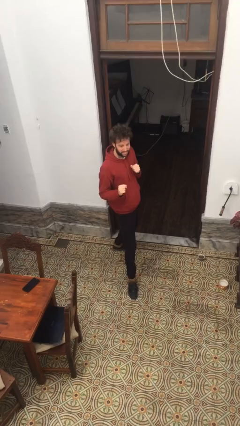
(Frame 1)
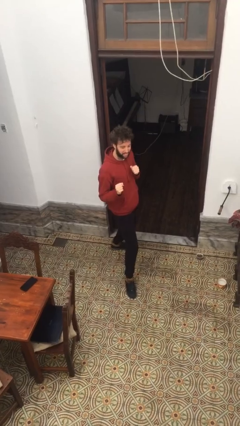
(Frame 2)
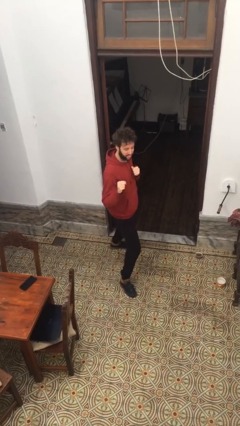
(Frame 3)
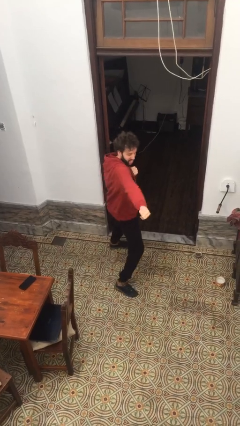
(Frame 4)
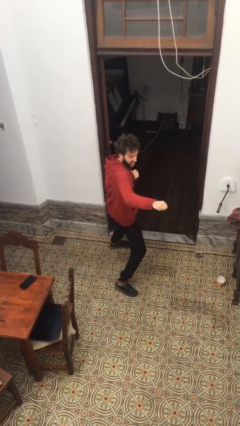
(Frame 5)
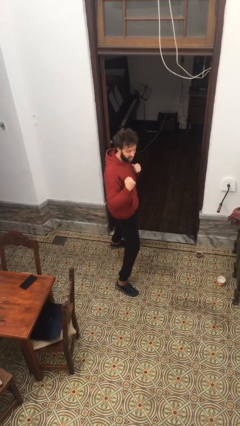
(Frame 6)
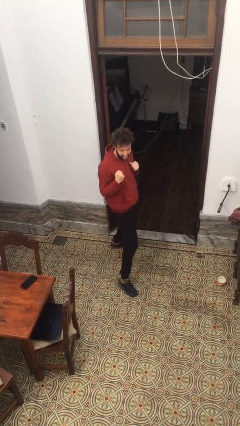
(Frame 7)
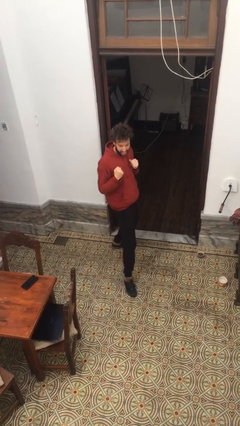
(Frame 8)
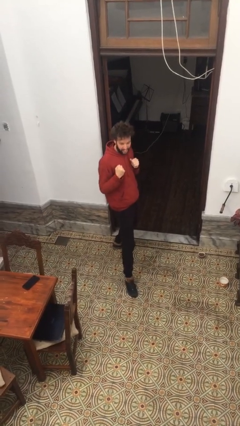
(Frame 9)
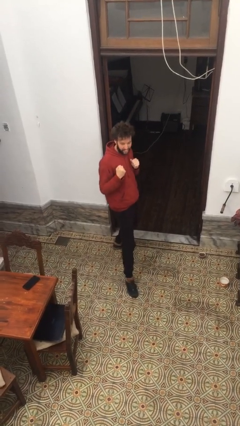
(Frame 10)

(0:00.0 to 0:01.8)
person karate chop

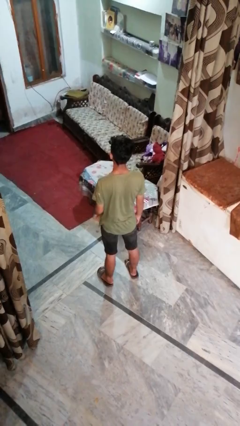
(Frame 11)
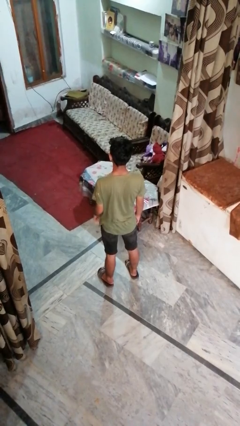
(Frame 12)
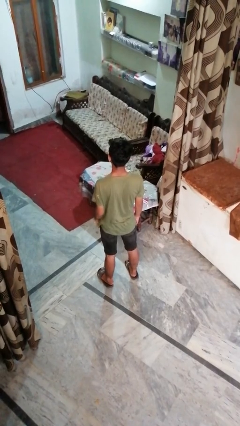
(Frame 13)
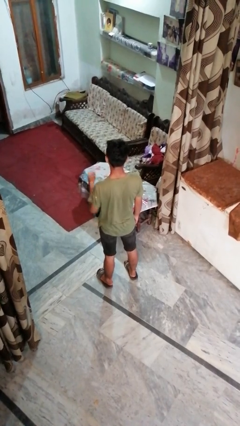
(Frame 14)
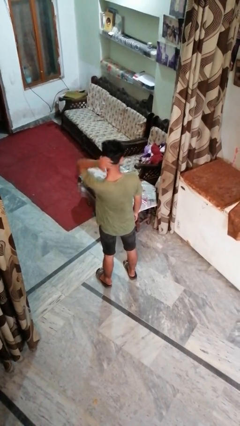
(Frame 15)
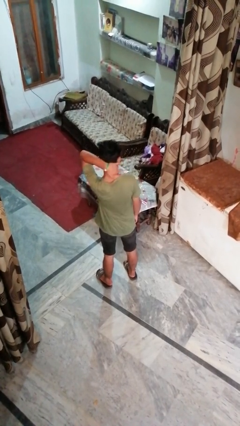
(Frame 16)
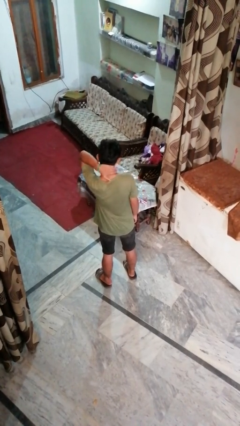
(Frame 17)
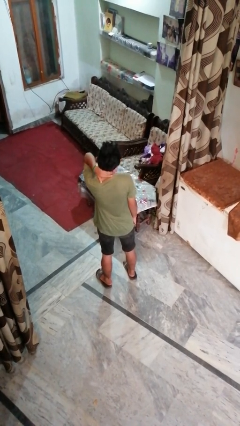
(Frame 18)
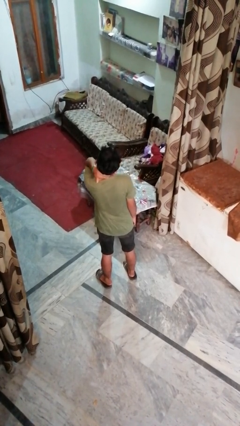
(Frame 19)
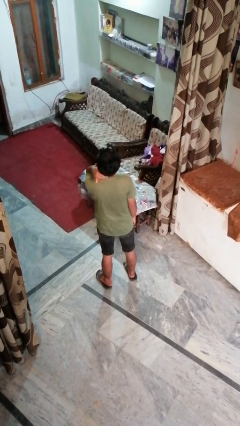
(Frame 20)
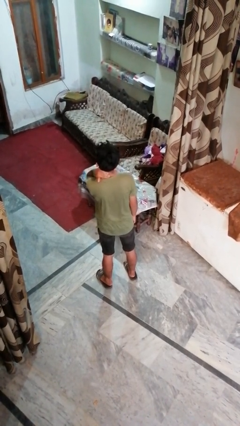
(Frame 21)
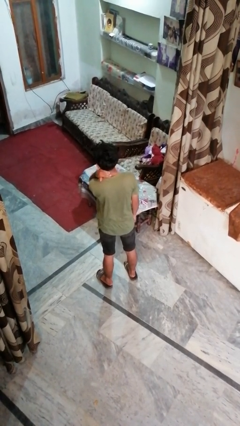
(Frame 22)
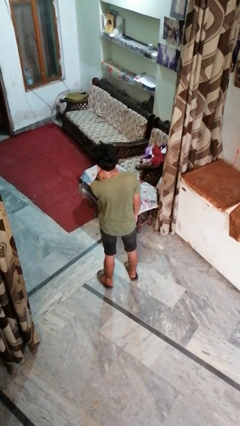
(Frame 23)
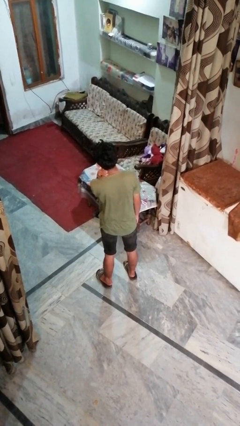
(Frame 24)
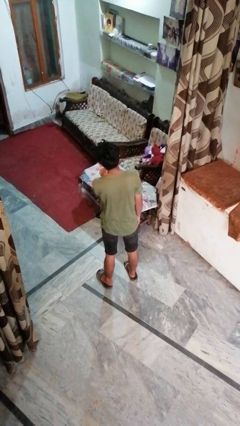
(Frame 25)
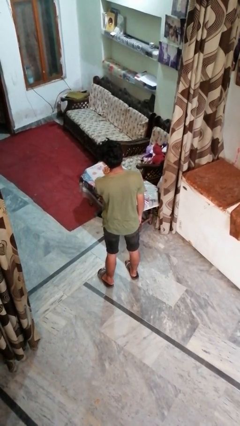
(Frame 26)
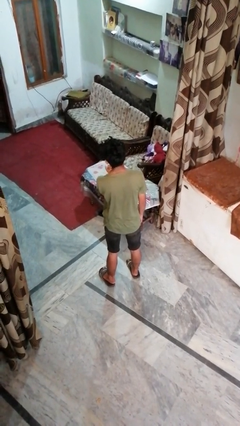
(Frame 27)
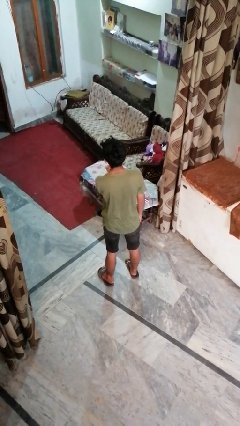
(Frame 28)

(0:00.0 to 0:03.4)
person rubs neck

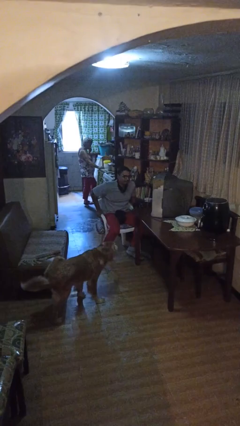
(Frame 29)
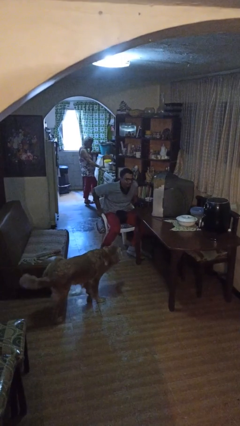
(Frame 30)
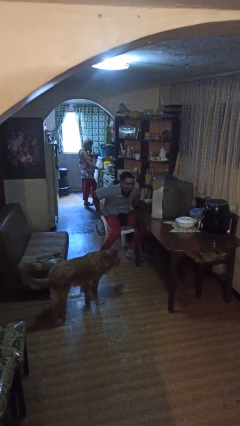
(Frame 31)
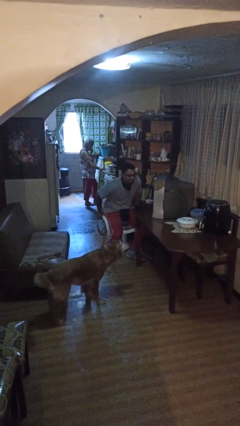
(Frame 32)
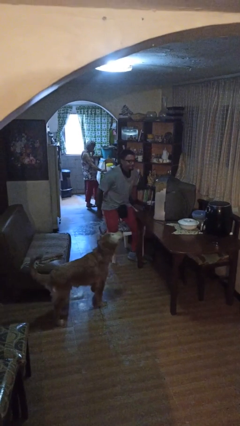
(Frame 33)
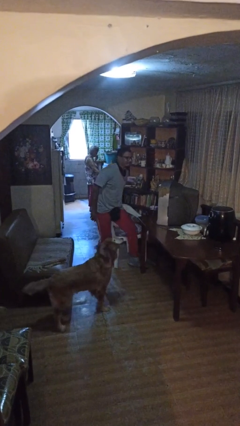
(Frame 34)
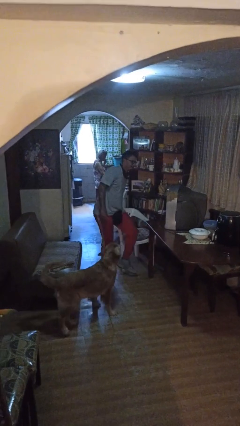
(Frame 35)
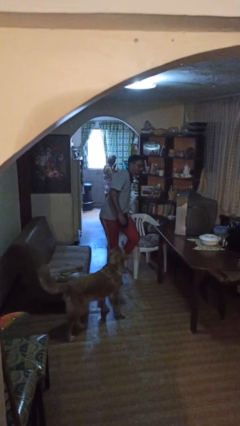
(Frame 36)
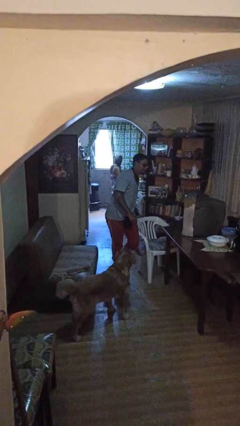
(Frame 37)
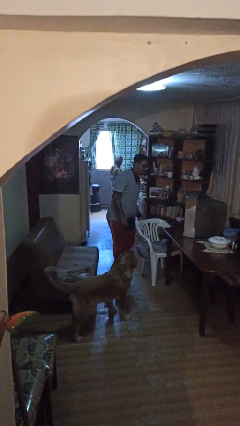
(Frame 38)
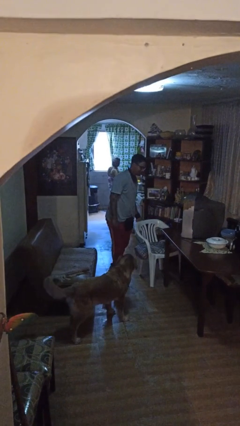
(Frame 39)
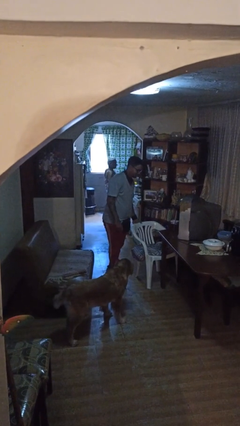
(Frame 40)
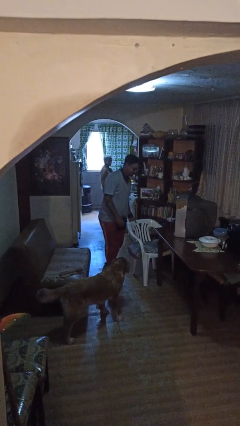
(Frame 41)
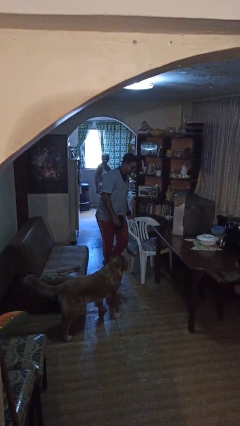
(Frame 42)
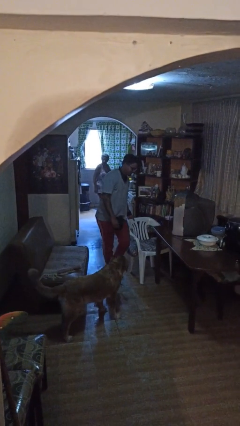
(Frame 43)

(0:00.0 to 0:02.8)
person stands up

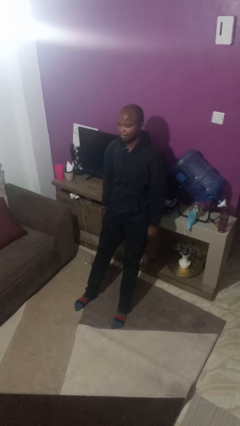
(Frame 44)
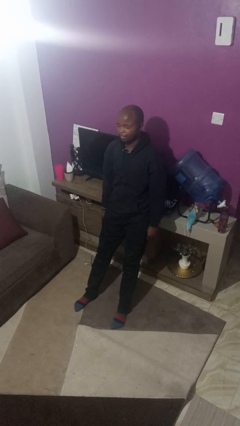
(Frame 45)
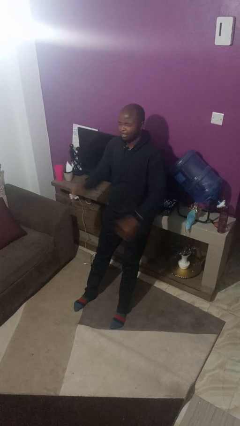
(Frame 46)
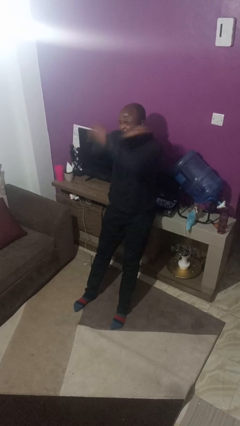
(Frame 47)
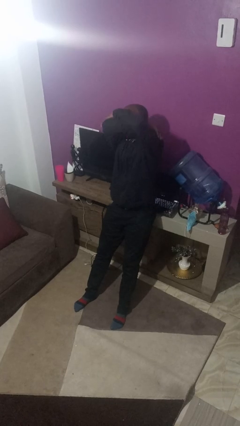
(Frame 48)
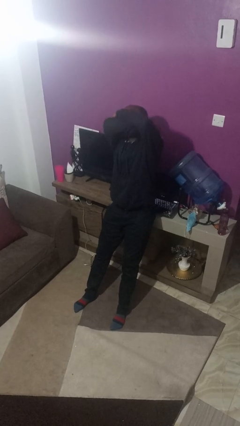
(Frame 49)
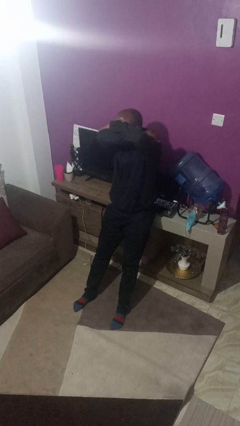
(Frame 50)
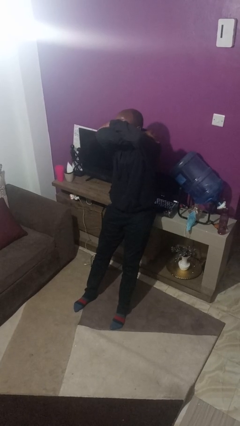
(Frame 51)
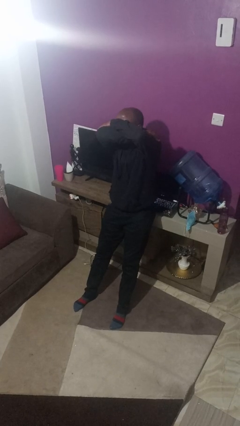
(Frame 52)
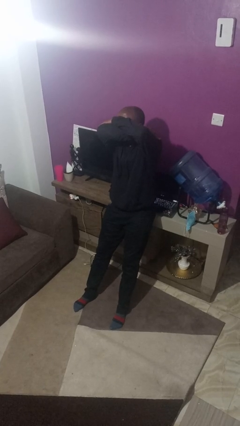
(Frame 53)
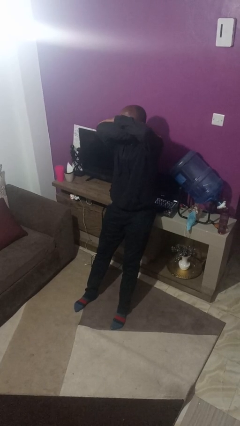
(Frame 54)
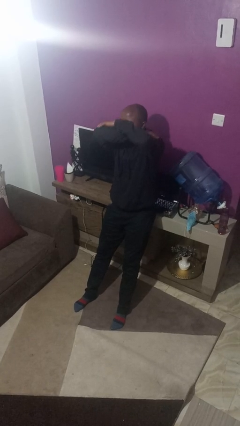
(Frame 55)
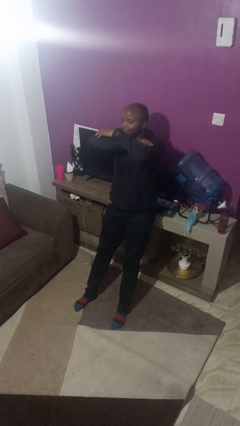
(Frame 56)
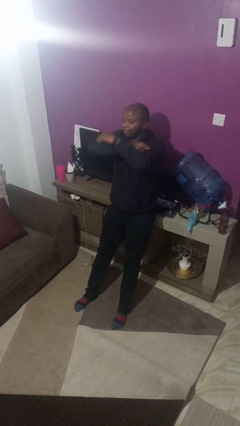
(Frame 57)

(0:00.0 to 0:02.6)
person sneezes into hand

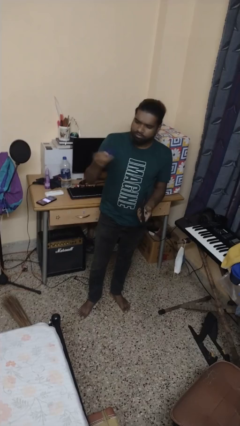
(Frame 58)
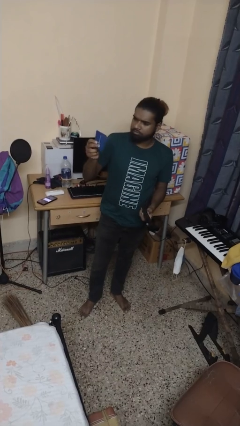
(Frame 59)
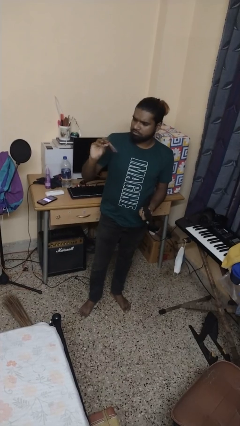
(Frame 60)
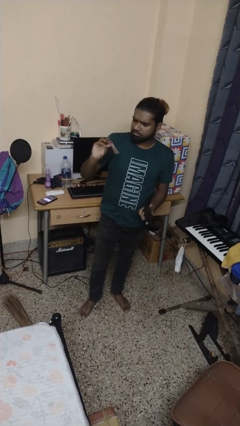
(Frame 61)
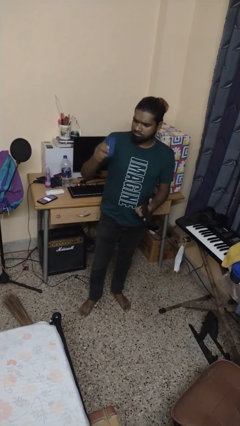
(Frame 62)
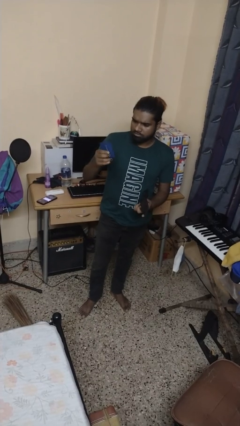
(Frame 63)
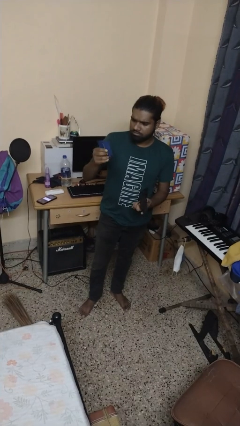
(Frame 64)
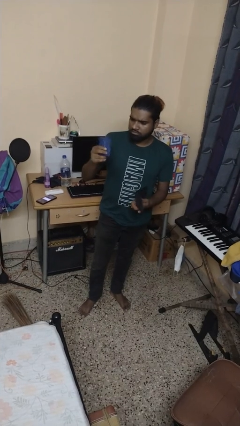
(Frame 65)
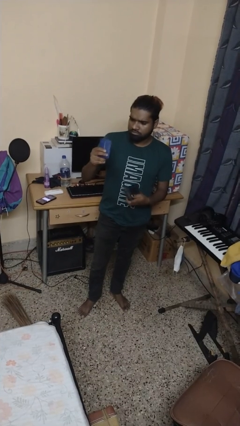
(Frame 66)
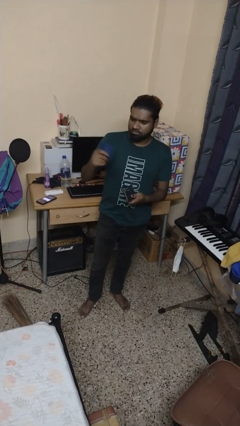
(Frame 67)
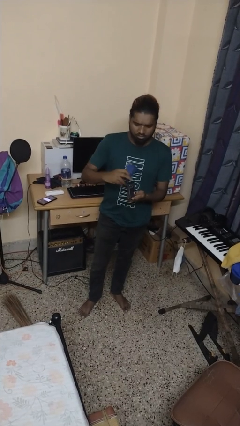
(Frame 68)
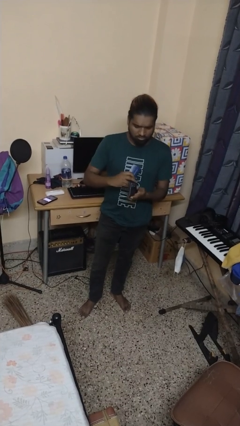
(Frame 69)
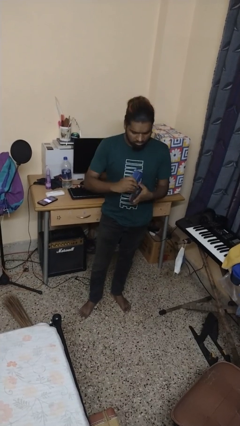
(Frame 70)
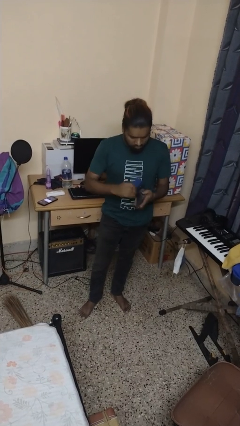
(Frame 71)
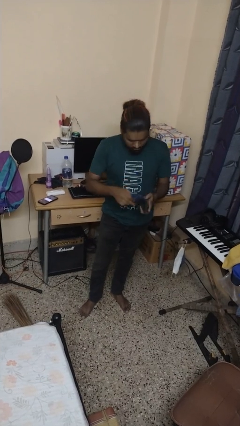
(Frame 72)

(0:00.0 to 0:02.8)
person takes object from purse

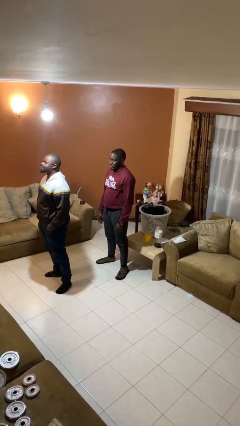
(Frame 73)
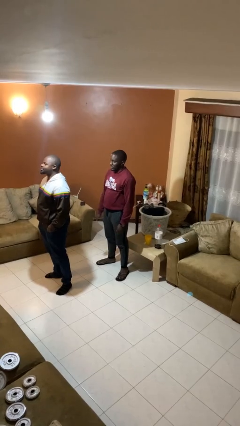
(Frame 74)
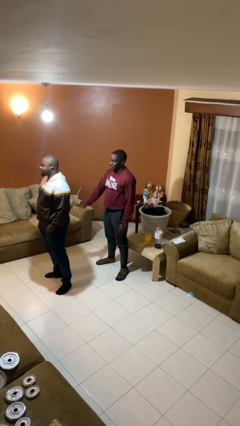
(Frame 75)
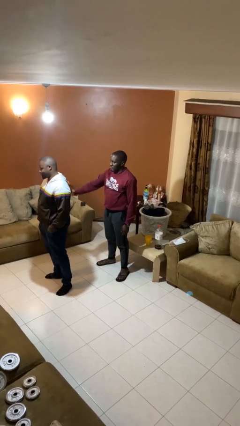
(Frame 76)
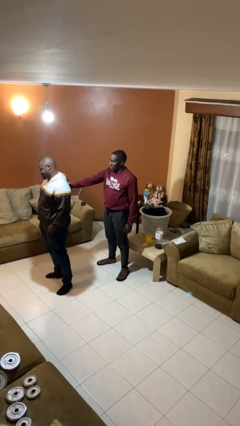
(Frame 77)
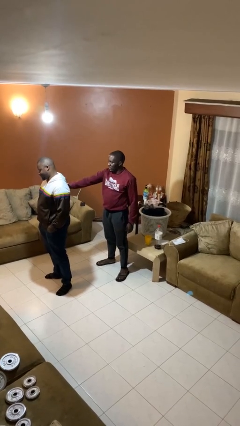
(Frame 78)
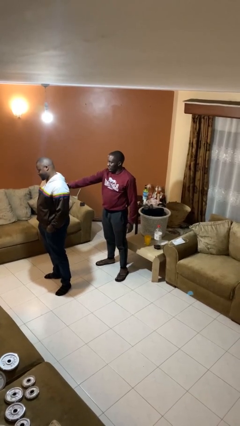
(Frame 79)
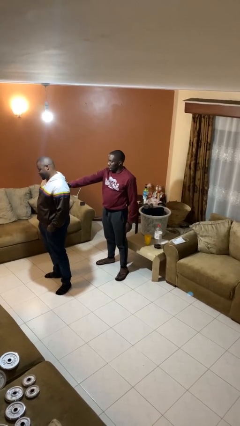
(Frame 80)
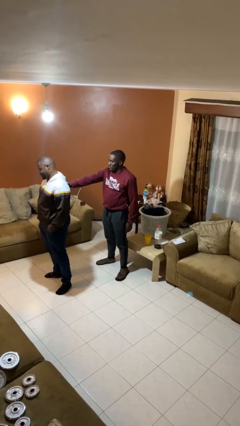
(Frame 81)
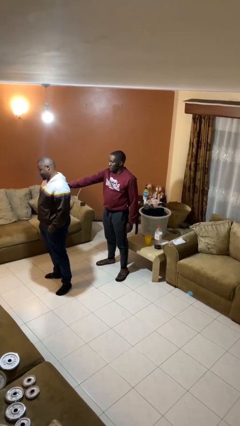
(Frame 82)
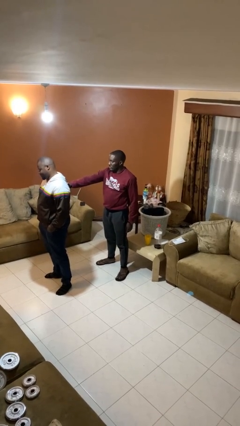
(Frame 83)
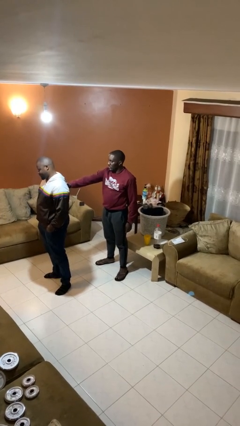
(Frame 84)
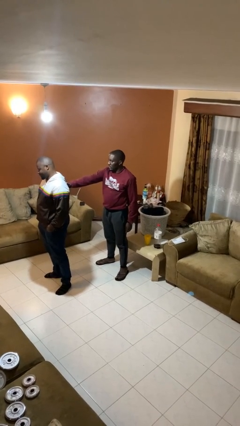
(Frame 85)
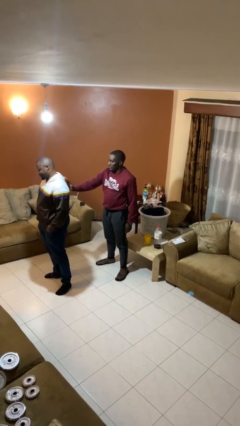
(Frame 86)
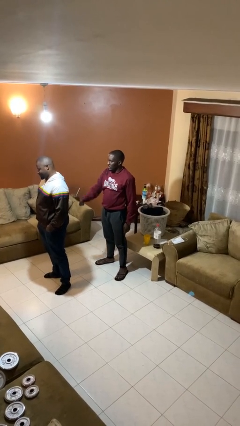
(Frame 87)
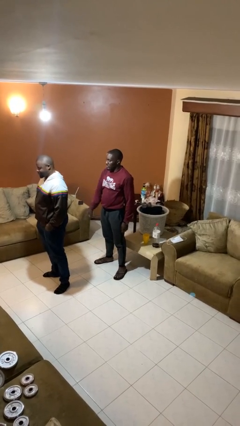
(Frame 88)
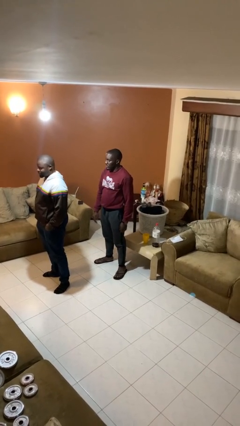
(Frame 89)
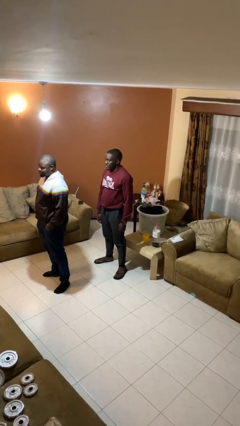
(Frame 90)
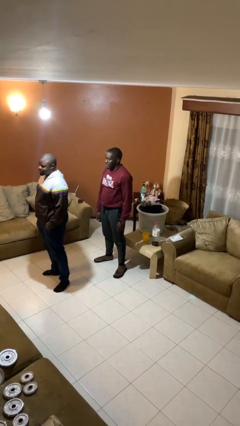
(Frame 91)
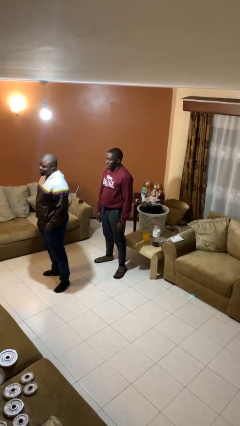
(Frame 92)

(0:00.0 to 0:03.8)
person touches back of person

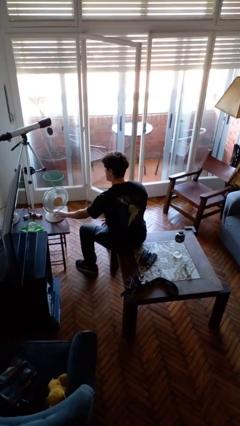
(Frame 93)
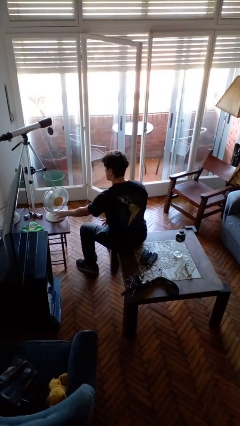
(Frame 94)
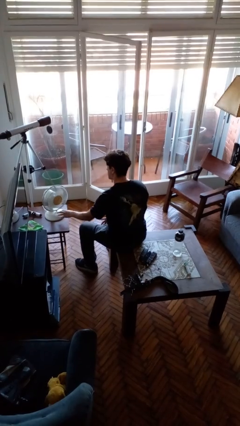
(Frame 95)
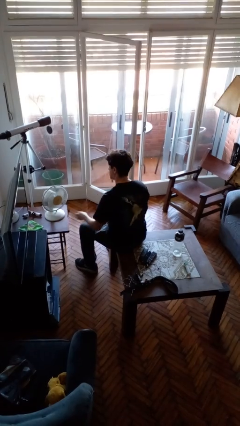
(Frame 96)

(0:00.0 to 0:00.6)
person turns on fan
